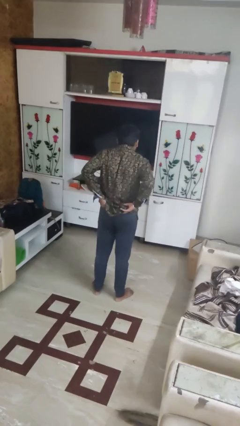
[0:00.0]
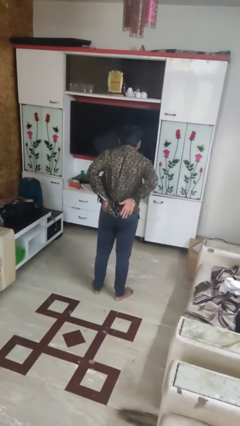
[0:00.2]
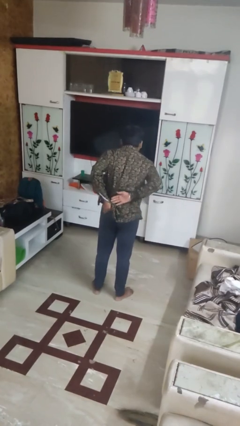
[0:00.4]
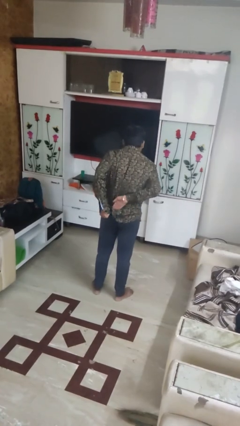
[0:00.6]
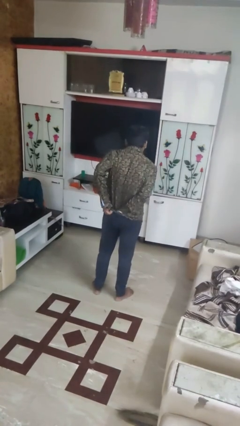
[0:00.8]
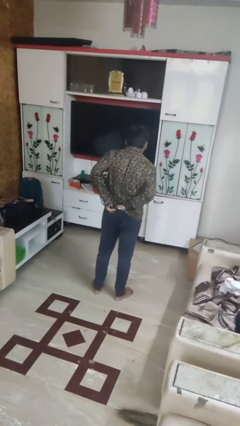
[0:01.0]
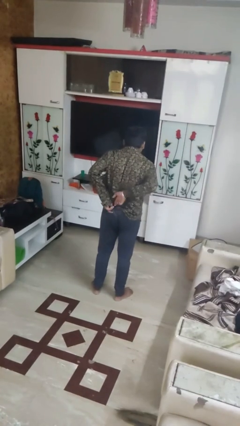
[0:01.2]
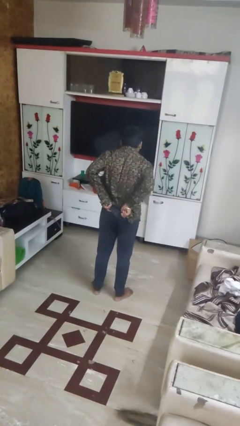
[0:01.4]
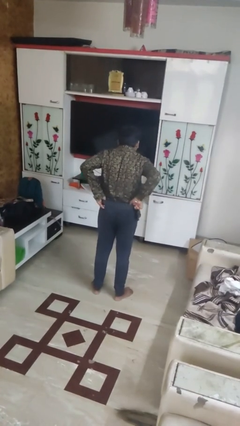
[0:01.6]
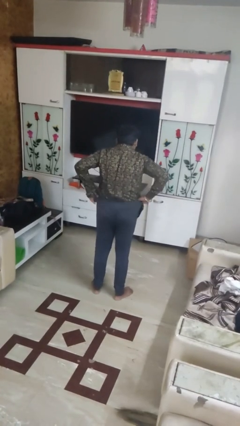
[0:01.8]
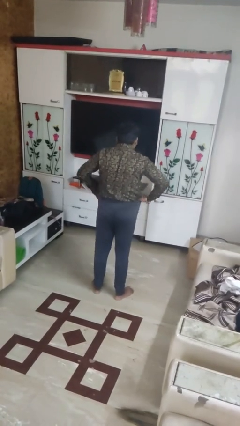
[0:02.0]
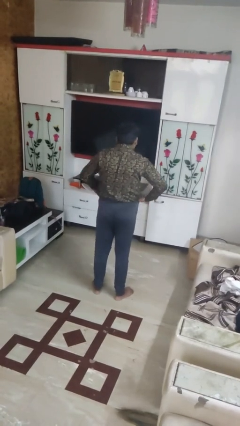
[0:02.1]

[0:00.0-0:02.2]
person tucks in shirt

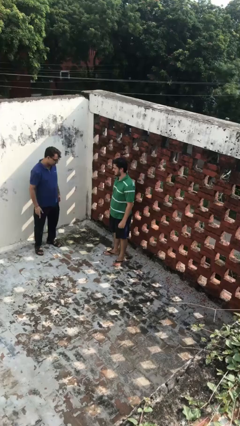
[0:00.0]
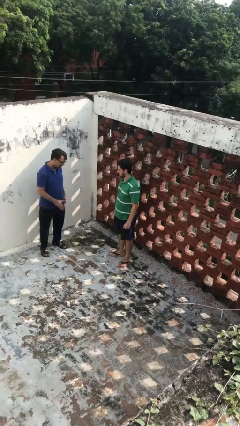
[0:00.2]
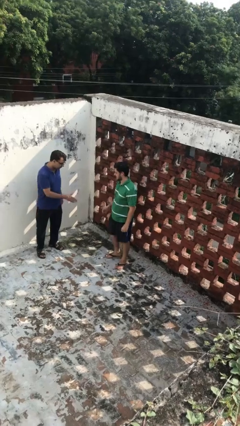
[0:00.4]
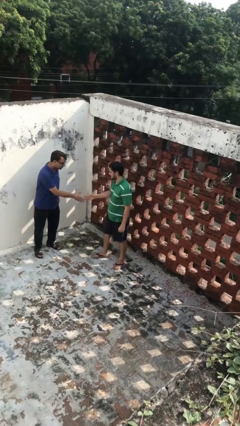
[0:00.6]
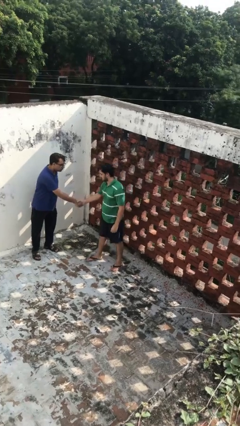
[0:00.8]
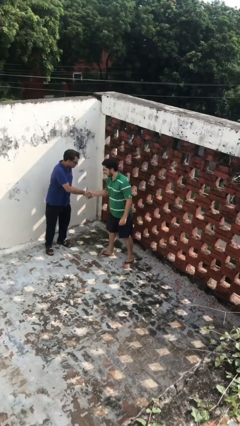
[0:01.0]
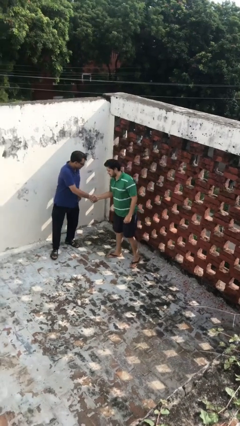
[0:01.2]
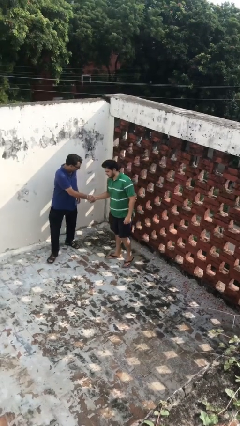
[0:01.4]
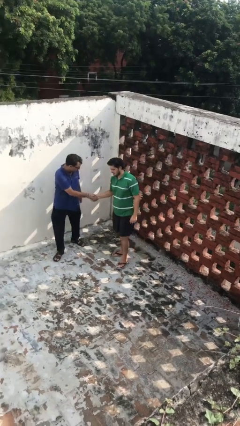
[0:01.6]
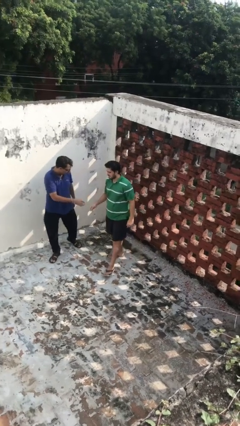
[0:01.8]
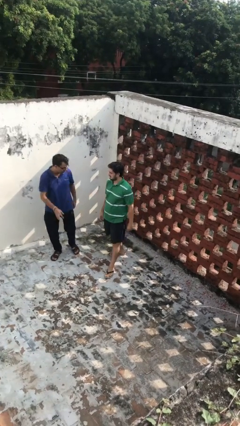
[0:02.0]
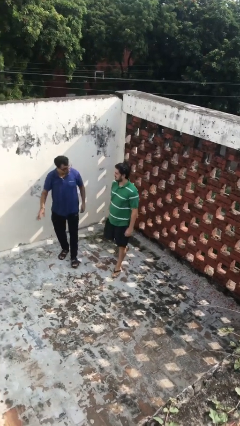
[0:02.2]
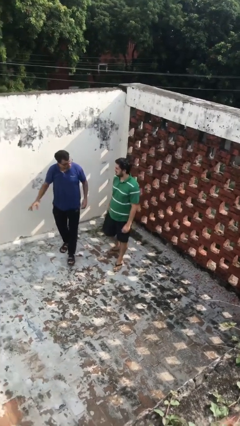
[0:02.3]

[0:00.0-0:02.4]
person shakes hand

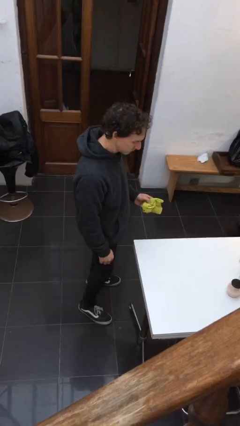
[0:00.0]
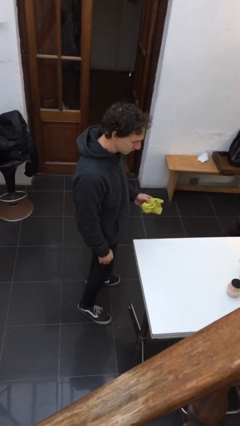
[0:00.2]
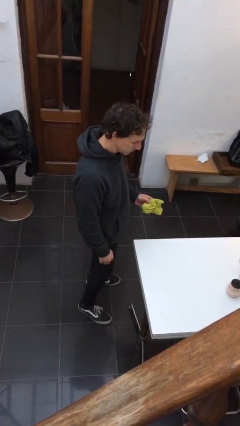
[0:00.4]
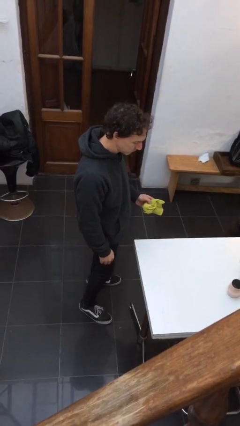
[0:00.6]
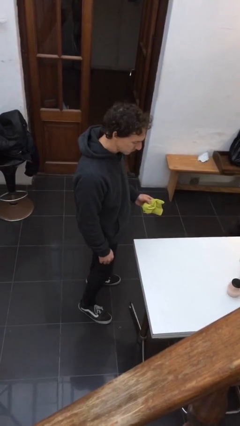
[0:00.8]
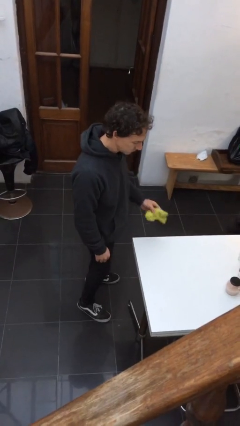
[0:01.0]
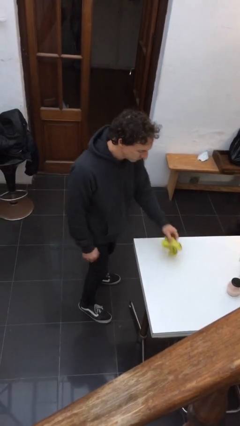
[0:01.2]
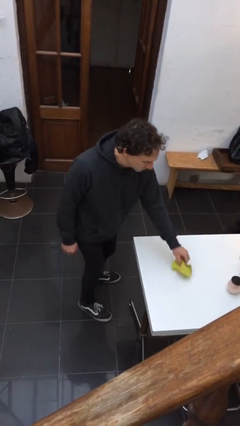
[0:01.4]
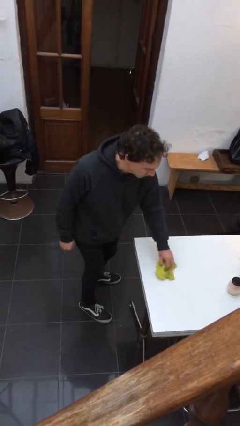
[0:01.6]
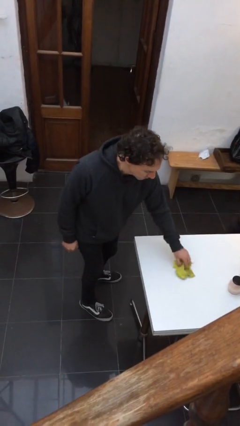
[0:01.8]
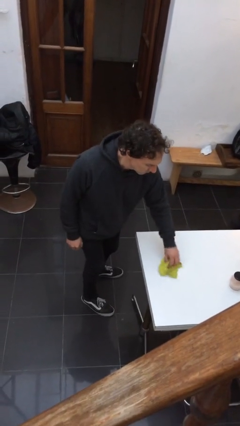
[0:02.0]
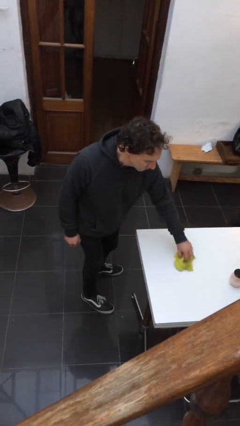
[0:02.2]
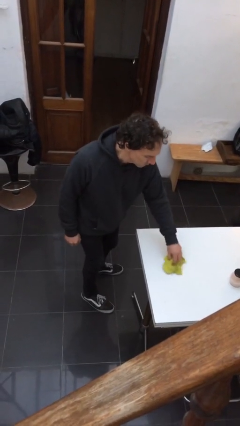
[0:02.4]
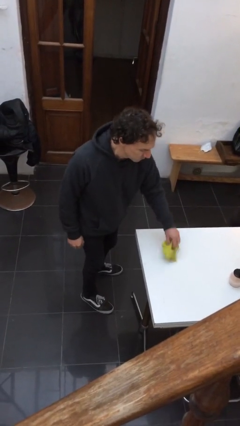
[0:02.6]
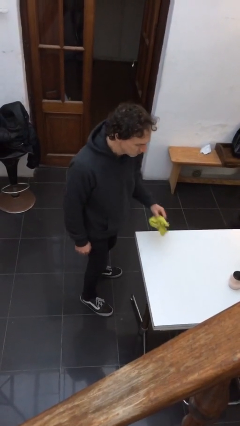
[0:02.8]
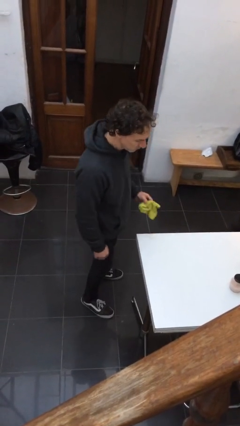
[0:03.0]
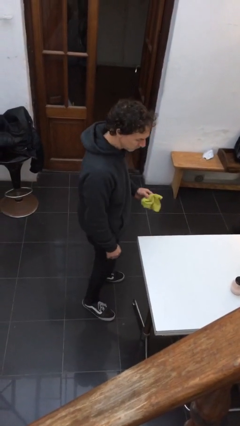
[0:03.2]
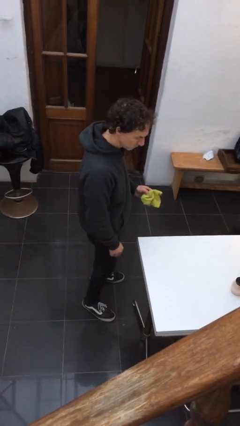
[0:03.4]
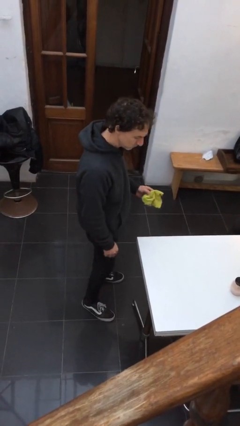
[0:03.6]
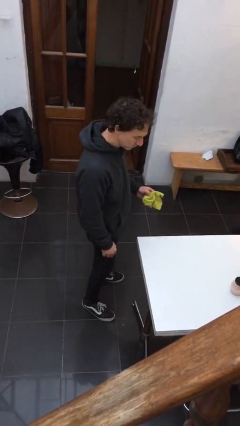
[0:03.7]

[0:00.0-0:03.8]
person cleans table with rag

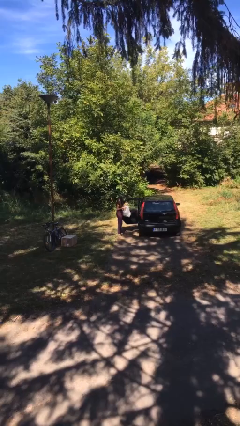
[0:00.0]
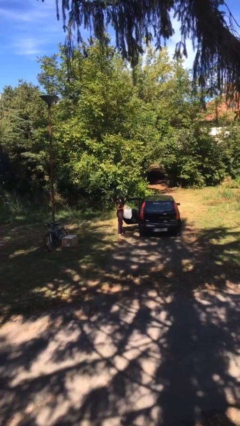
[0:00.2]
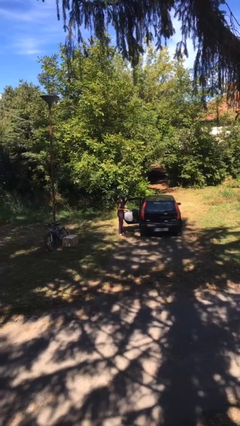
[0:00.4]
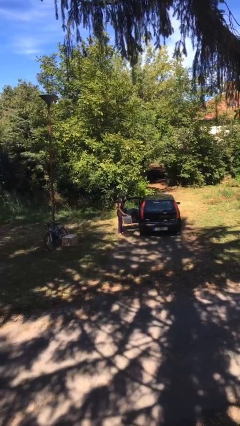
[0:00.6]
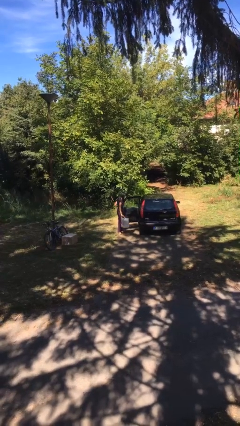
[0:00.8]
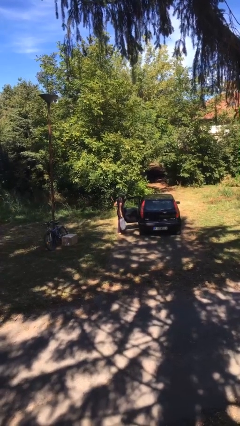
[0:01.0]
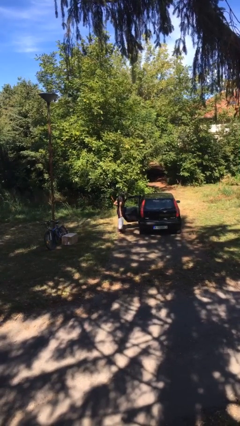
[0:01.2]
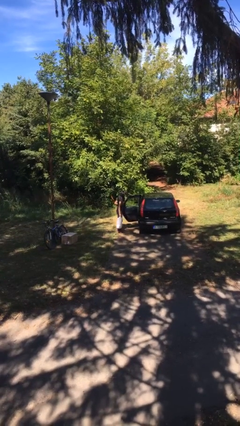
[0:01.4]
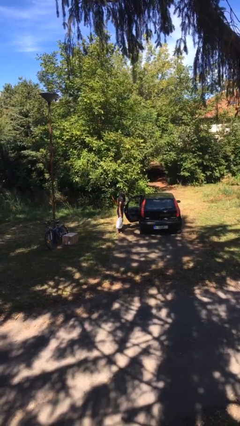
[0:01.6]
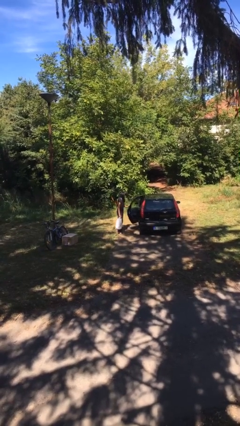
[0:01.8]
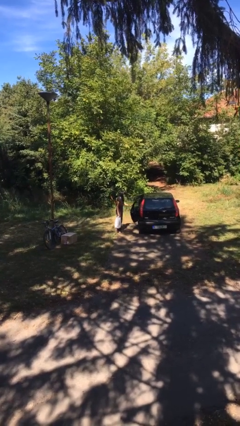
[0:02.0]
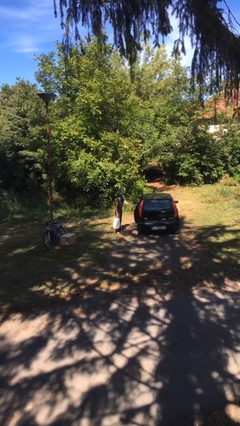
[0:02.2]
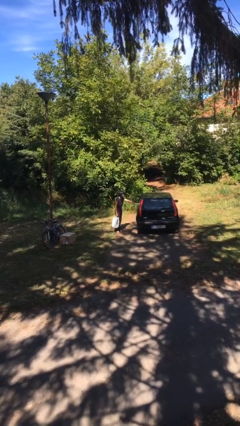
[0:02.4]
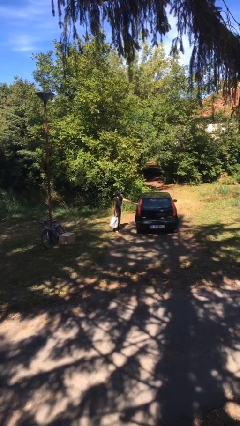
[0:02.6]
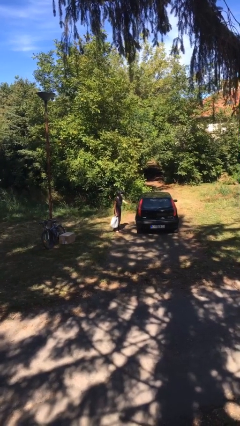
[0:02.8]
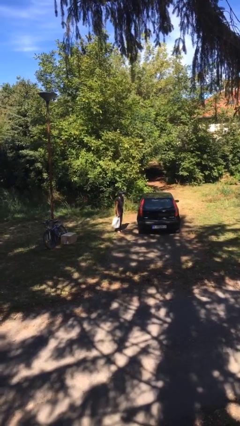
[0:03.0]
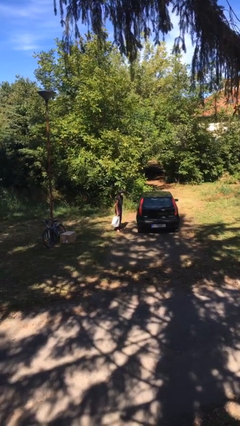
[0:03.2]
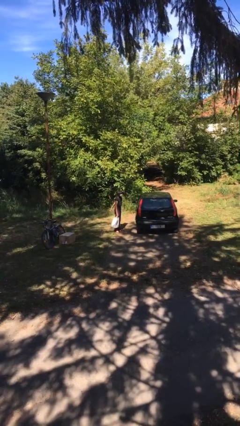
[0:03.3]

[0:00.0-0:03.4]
person closes car door

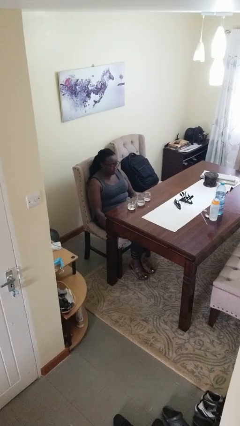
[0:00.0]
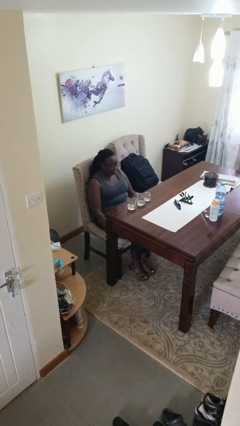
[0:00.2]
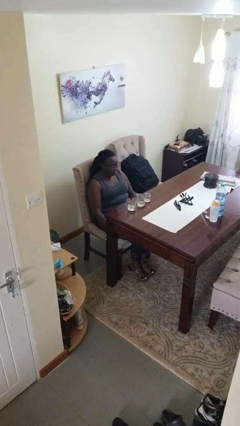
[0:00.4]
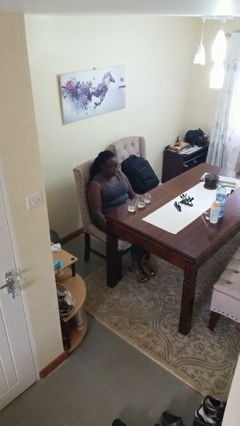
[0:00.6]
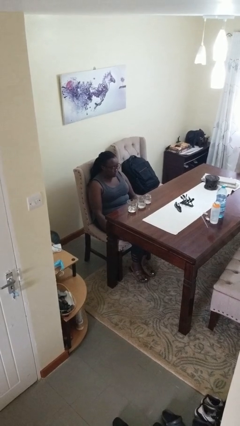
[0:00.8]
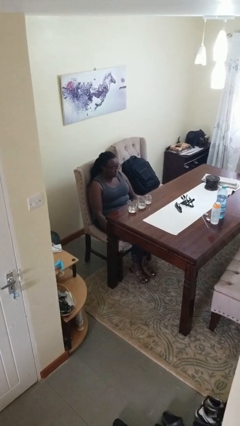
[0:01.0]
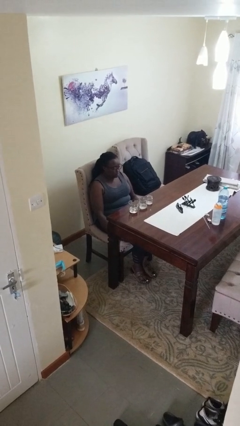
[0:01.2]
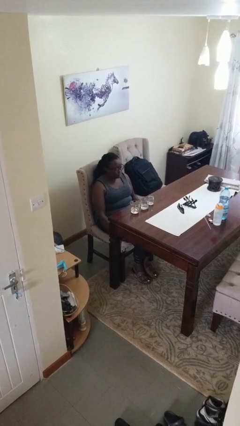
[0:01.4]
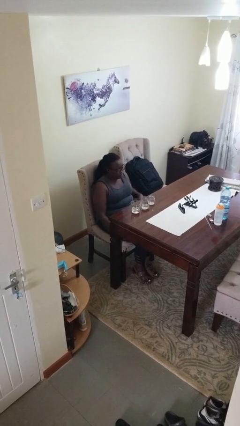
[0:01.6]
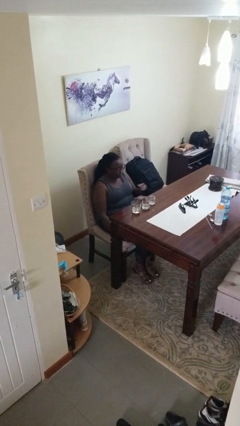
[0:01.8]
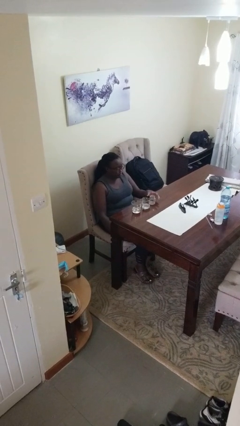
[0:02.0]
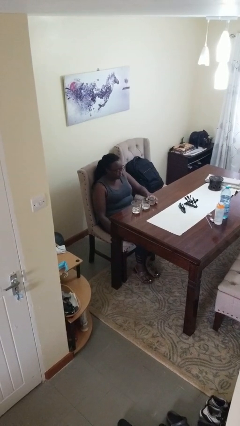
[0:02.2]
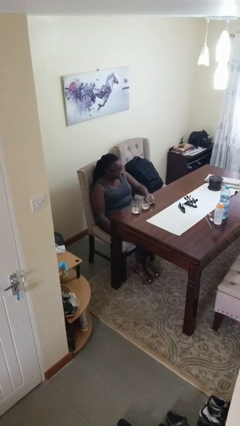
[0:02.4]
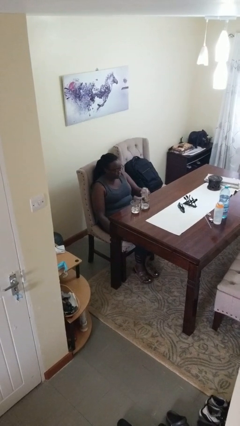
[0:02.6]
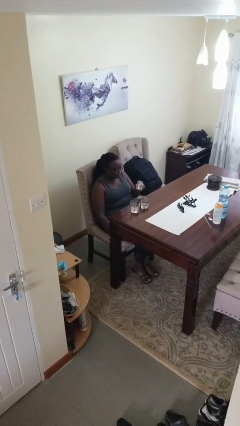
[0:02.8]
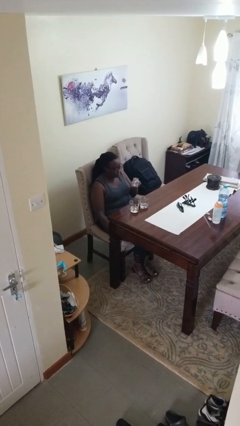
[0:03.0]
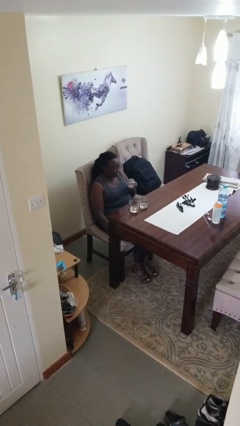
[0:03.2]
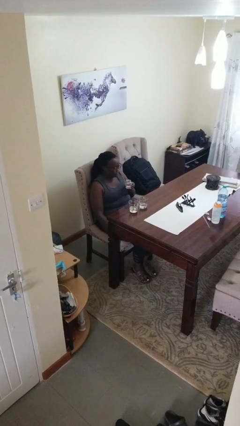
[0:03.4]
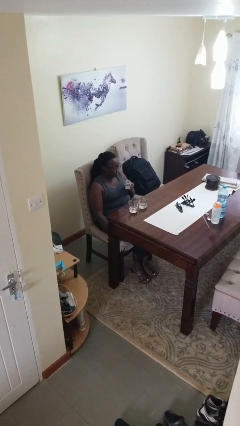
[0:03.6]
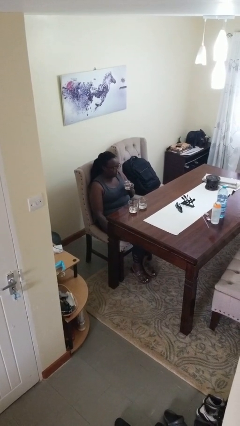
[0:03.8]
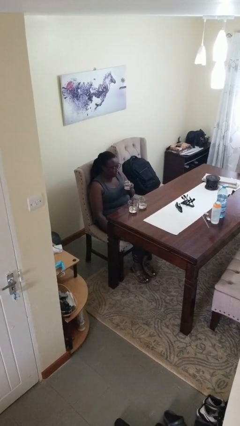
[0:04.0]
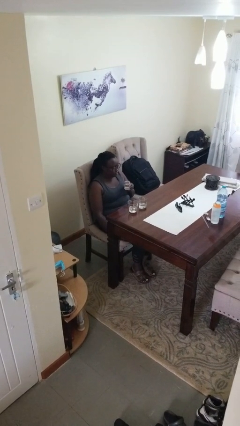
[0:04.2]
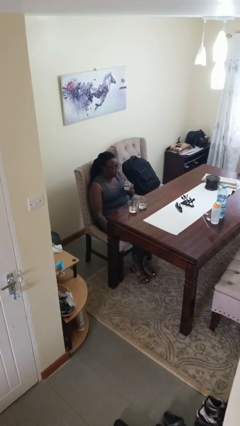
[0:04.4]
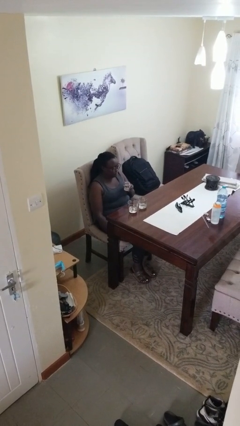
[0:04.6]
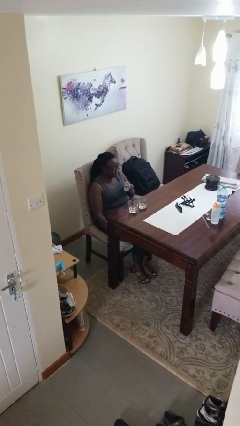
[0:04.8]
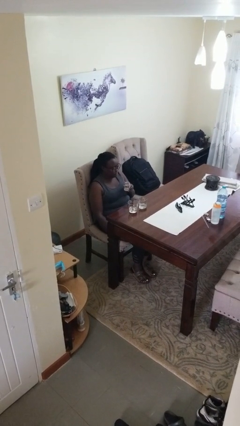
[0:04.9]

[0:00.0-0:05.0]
person picks up object from table

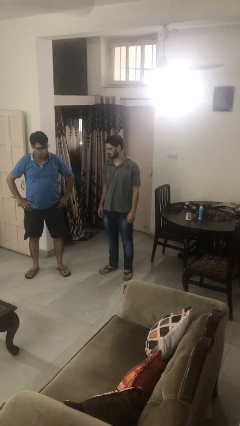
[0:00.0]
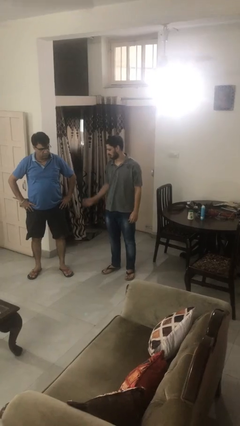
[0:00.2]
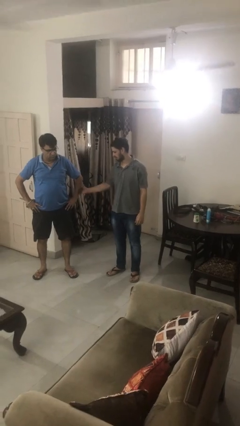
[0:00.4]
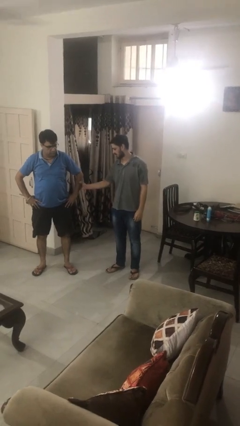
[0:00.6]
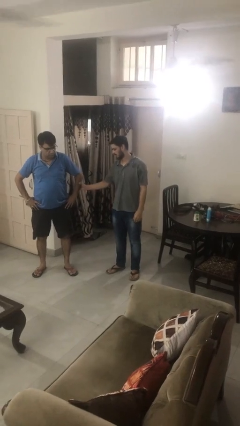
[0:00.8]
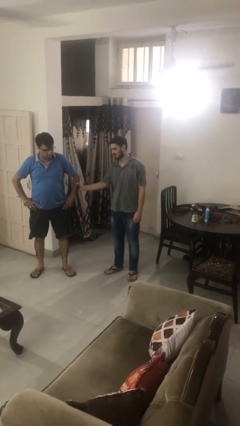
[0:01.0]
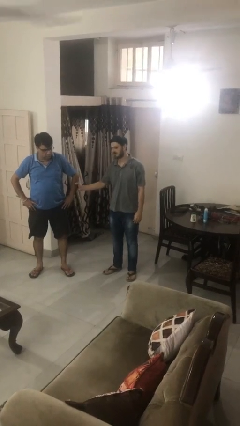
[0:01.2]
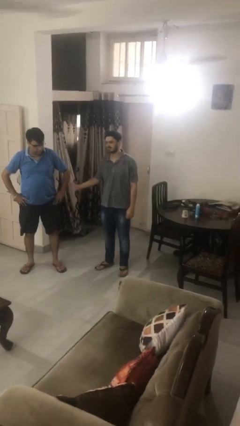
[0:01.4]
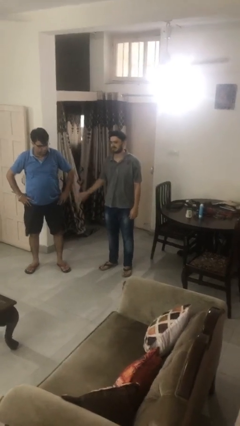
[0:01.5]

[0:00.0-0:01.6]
person grabs person by forearm
